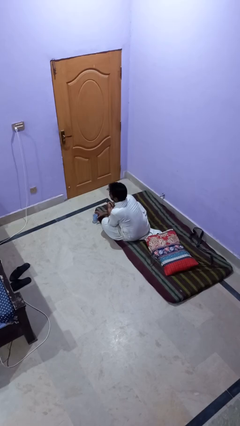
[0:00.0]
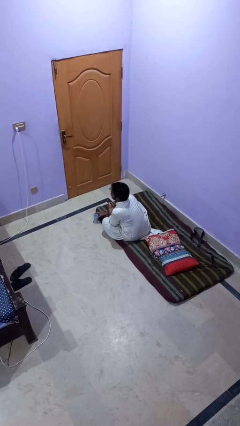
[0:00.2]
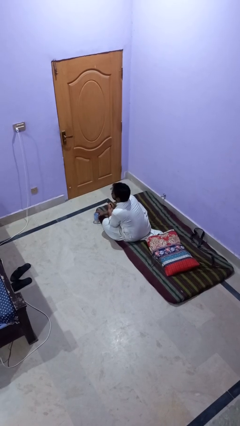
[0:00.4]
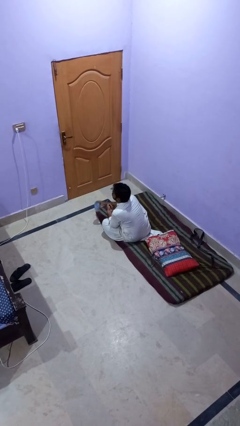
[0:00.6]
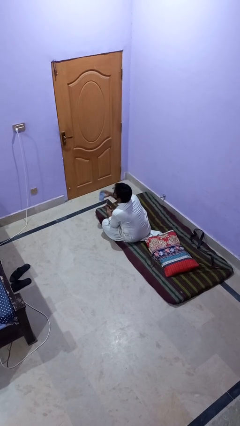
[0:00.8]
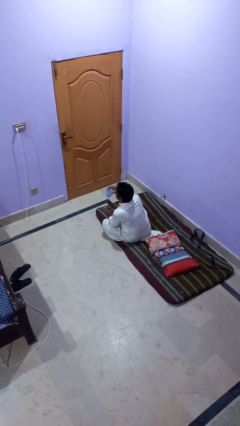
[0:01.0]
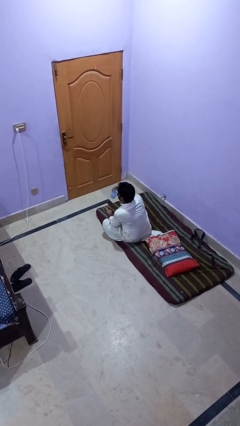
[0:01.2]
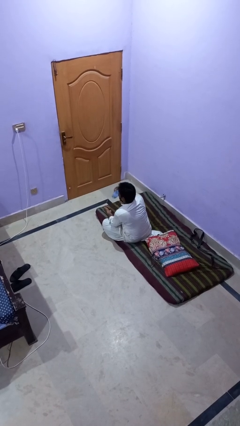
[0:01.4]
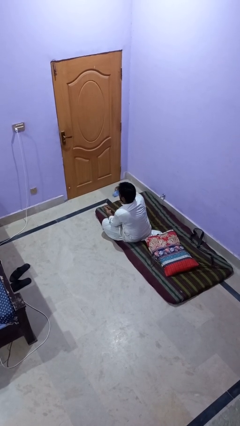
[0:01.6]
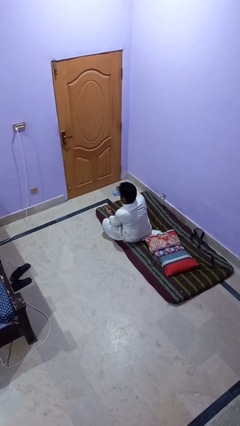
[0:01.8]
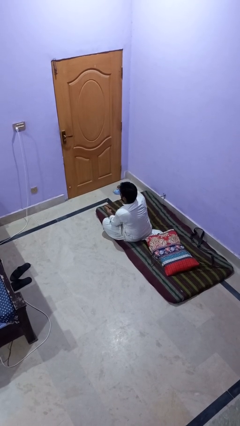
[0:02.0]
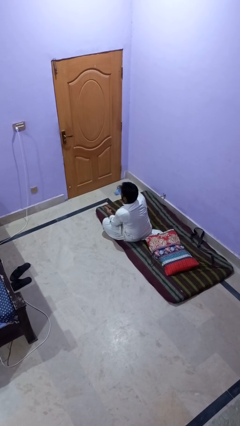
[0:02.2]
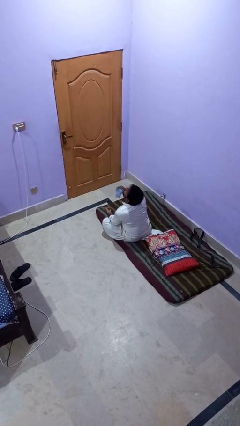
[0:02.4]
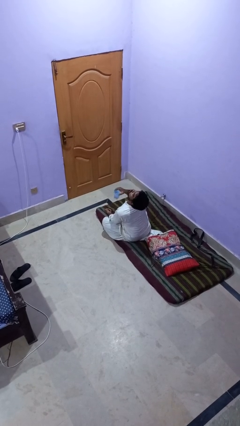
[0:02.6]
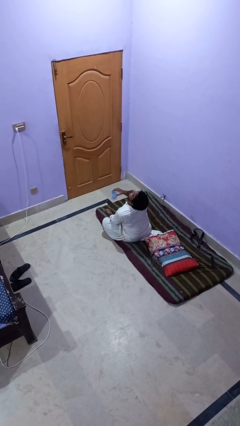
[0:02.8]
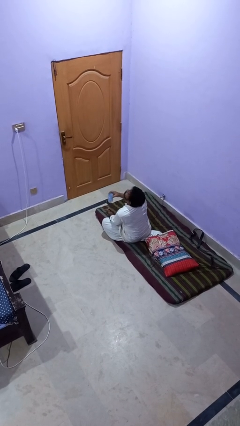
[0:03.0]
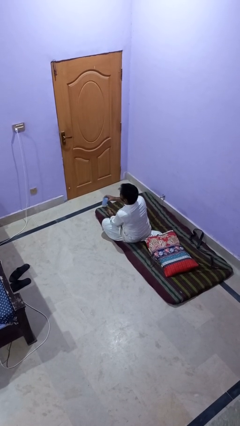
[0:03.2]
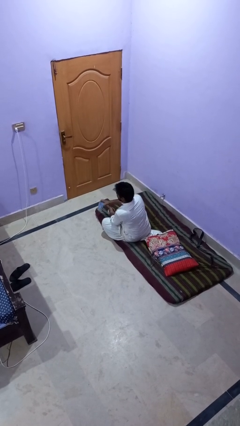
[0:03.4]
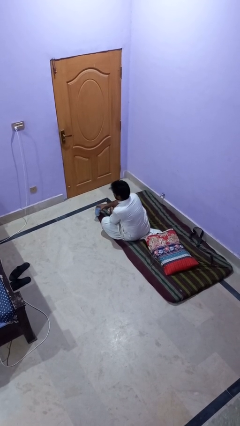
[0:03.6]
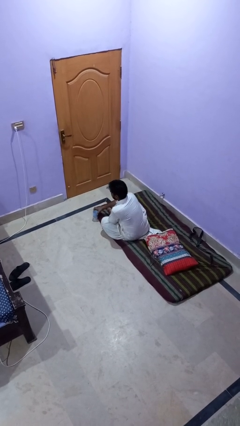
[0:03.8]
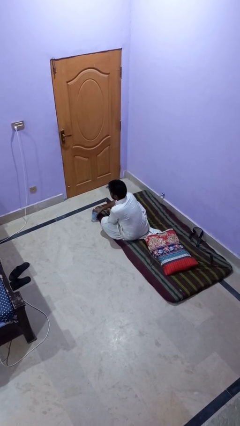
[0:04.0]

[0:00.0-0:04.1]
person drinks from cup

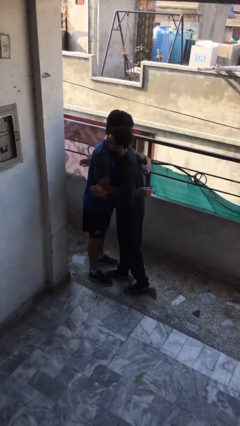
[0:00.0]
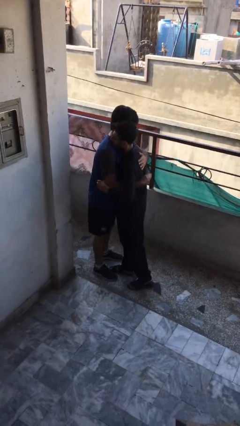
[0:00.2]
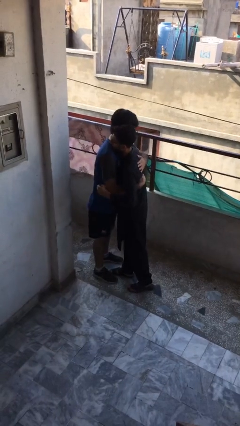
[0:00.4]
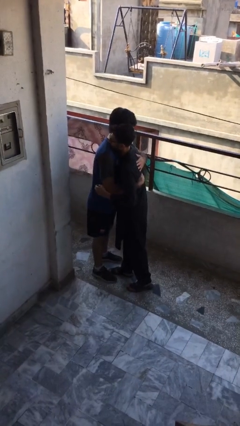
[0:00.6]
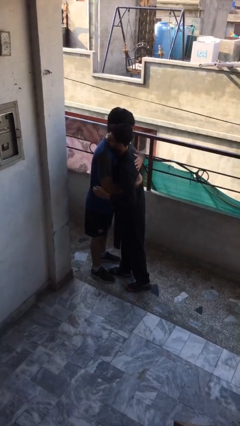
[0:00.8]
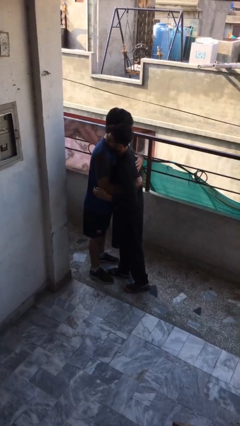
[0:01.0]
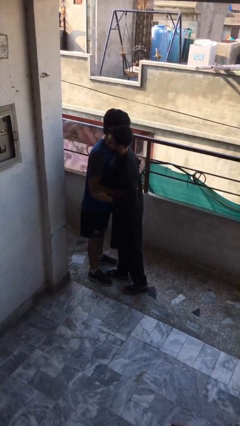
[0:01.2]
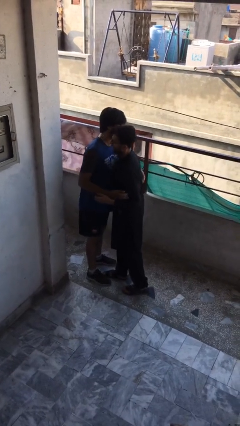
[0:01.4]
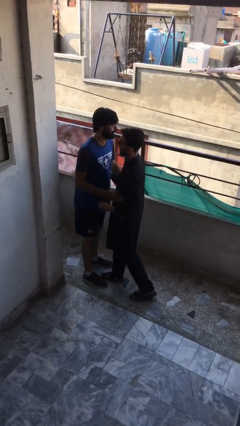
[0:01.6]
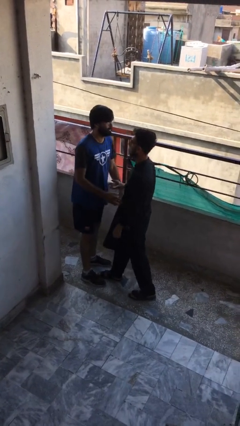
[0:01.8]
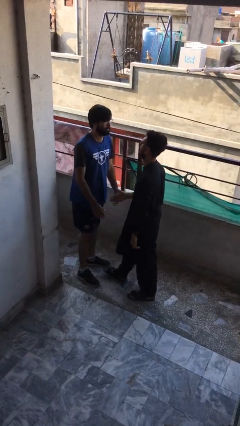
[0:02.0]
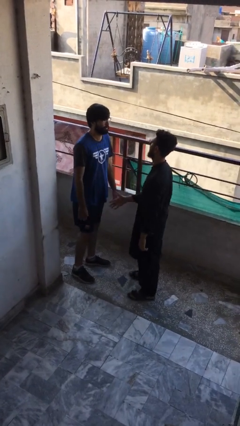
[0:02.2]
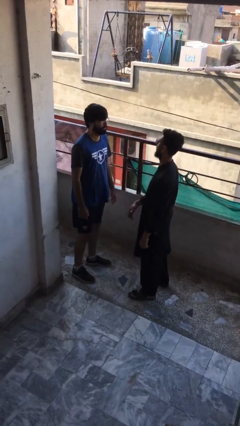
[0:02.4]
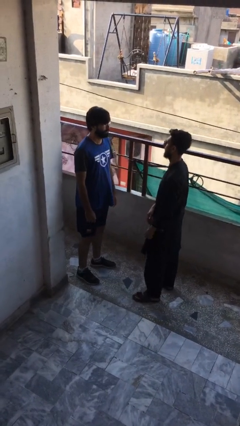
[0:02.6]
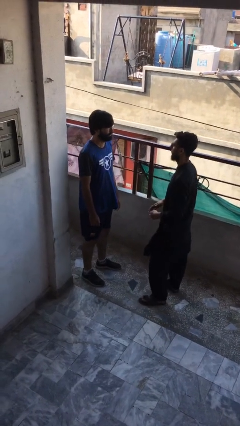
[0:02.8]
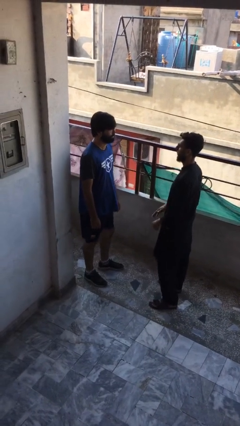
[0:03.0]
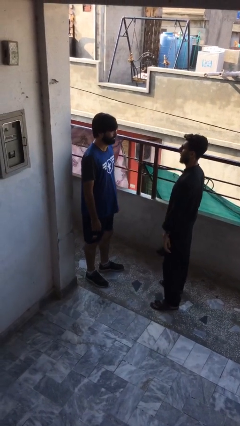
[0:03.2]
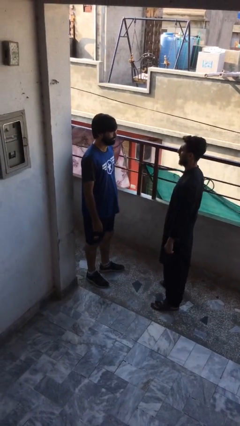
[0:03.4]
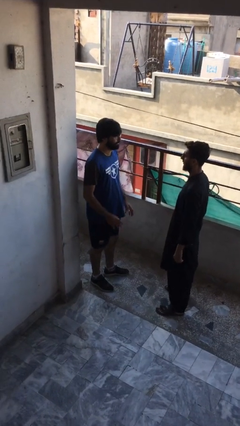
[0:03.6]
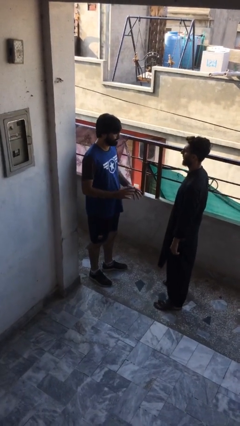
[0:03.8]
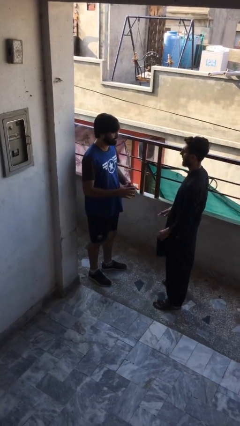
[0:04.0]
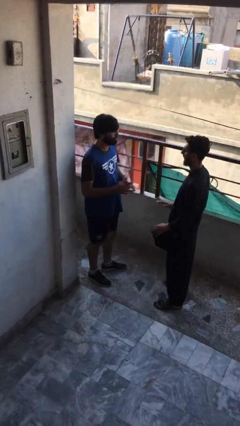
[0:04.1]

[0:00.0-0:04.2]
person embraces person

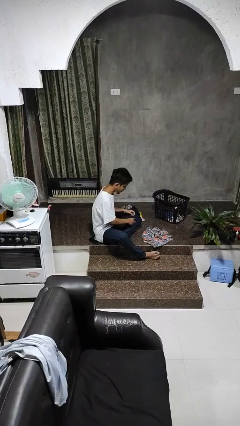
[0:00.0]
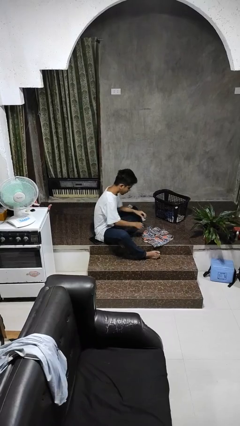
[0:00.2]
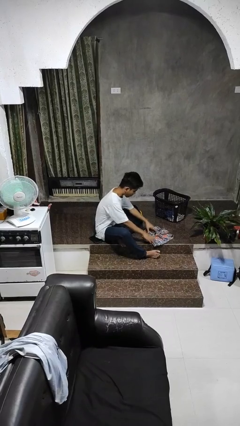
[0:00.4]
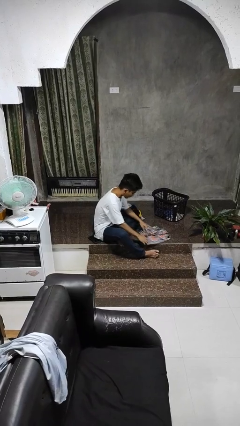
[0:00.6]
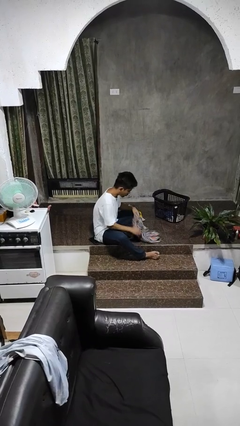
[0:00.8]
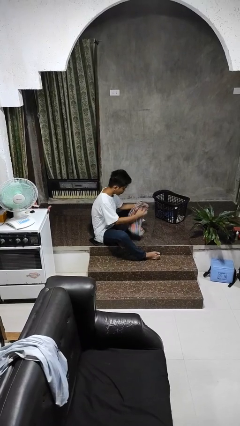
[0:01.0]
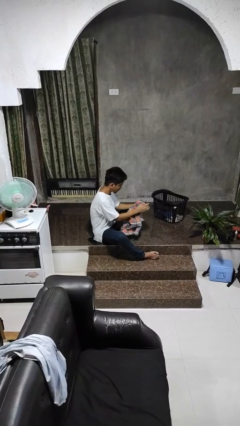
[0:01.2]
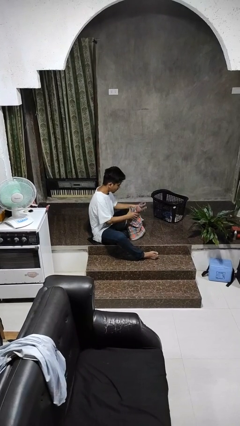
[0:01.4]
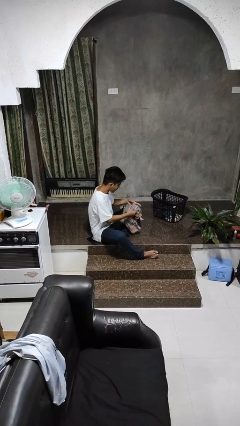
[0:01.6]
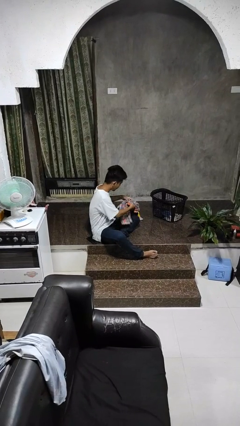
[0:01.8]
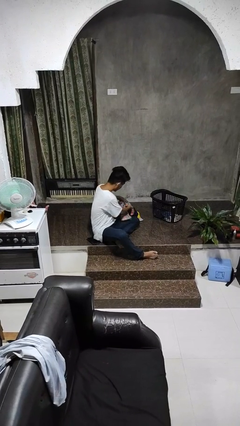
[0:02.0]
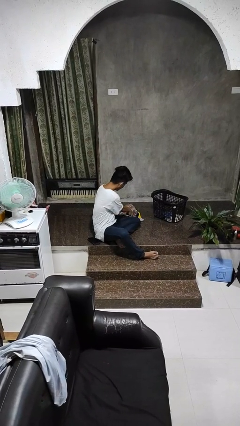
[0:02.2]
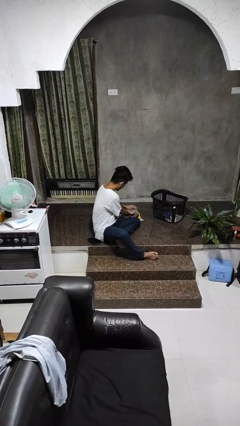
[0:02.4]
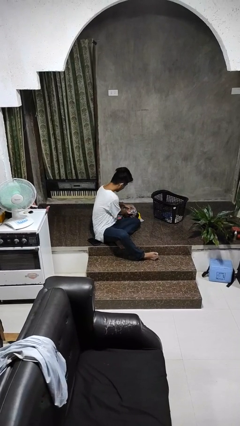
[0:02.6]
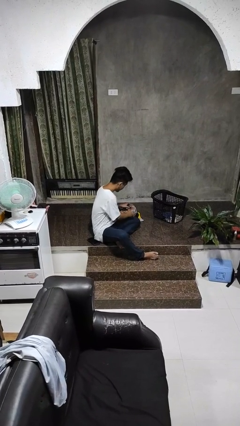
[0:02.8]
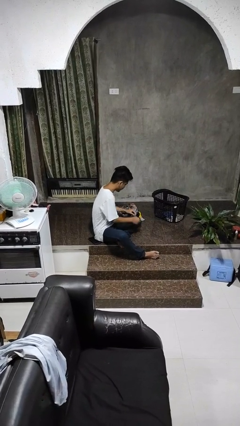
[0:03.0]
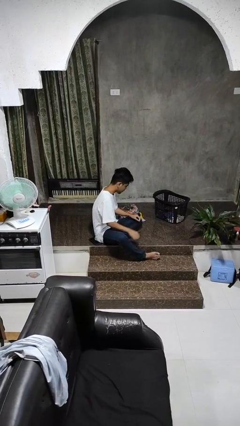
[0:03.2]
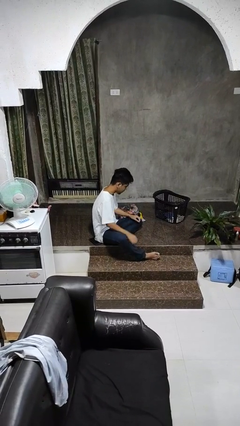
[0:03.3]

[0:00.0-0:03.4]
person folds shirt

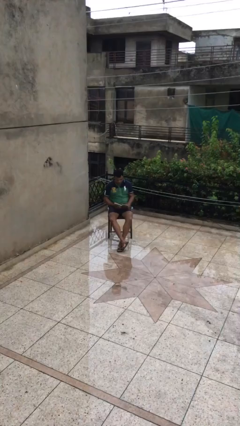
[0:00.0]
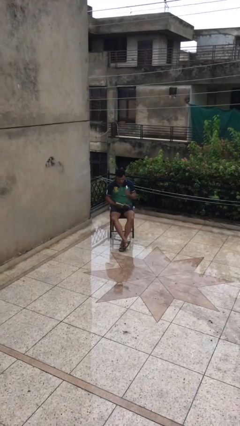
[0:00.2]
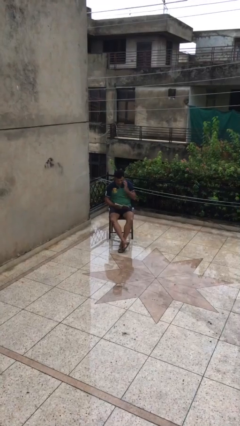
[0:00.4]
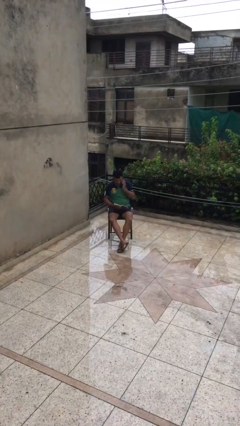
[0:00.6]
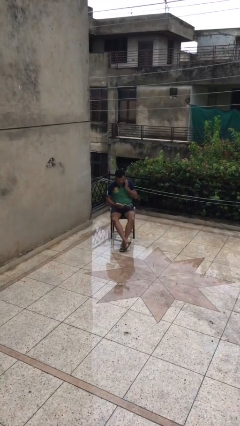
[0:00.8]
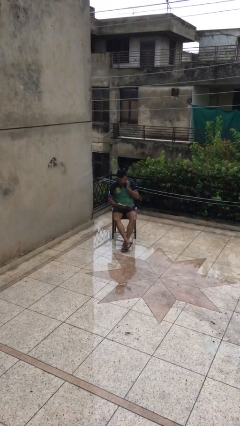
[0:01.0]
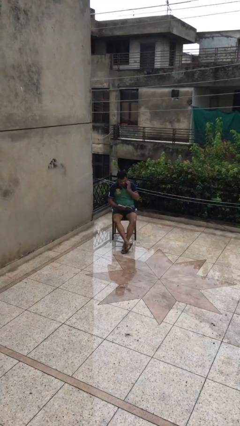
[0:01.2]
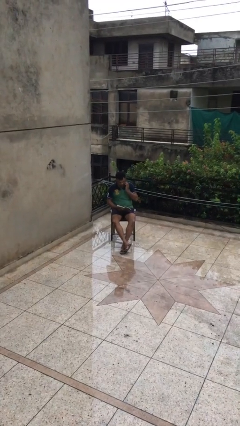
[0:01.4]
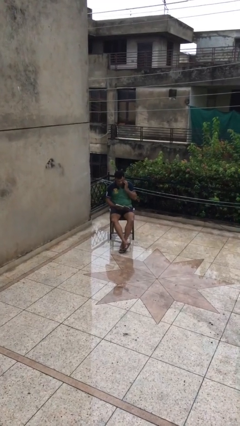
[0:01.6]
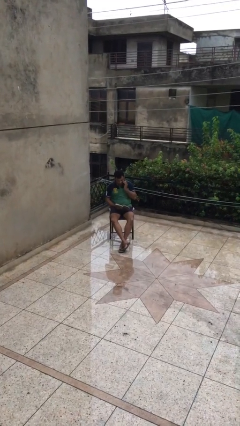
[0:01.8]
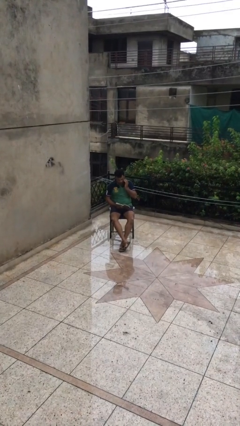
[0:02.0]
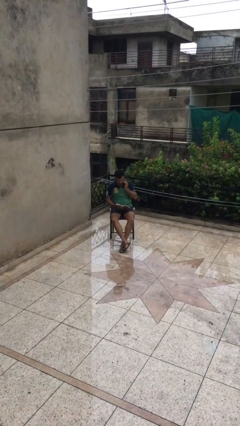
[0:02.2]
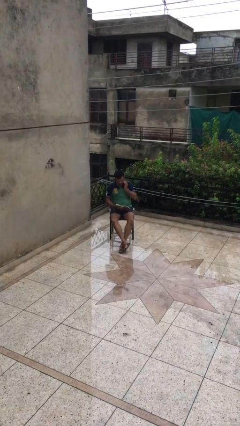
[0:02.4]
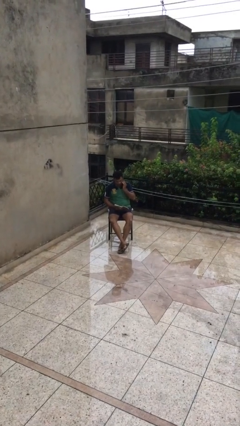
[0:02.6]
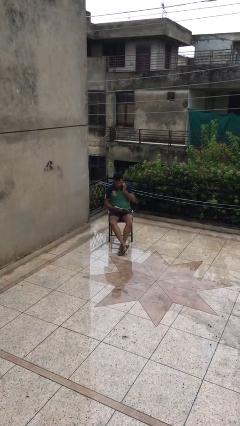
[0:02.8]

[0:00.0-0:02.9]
person reads document

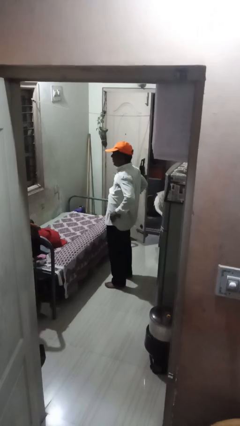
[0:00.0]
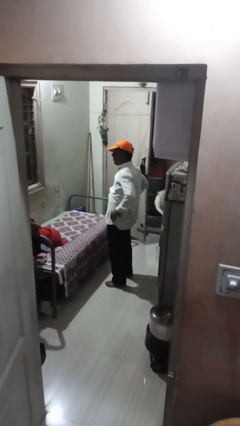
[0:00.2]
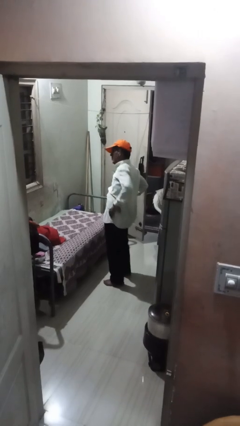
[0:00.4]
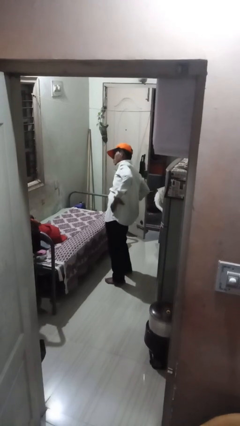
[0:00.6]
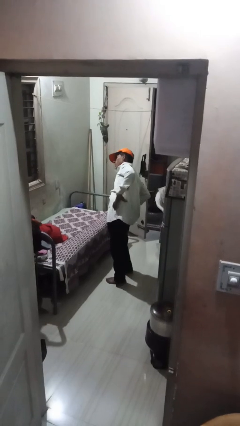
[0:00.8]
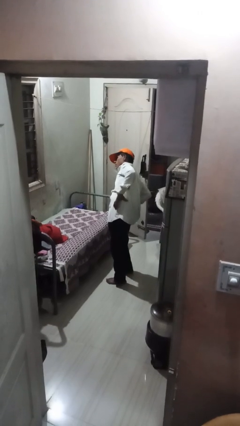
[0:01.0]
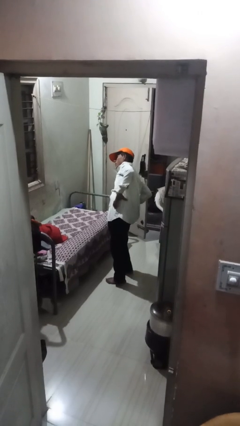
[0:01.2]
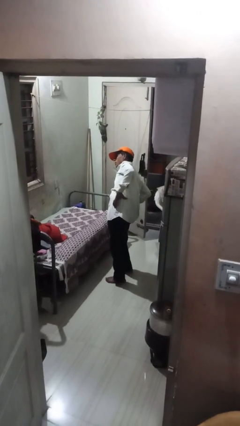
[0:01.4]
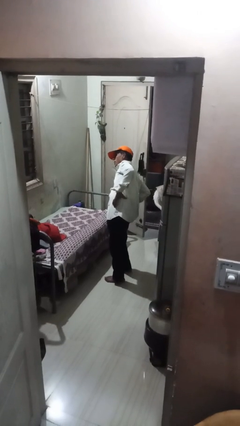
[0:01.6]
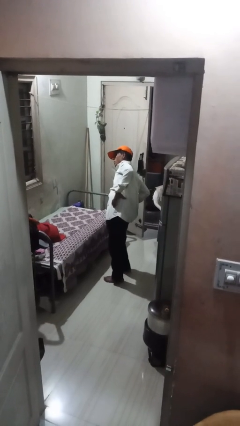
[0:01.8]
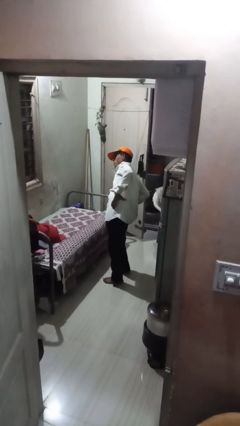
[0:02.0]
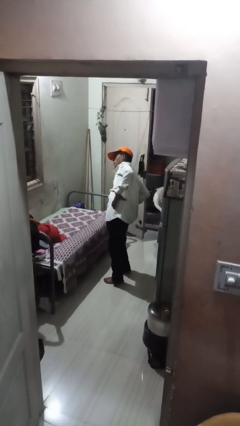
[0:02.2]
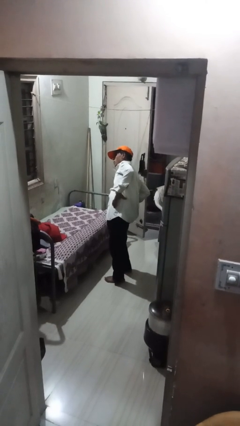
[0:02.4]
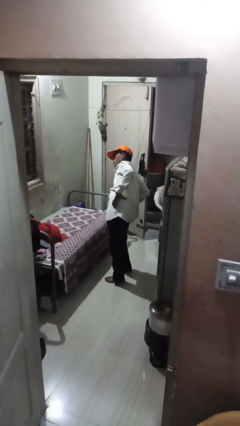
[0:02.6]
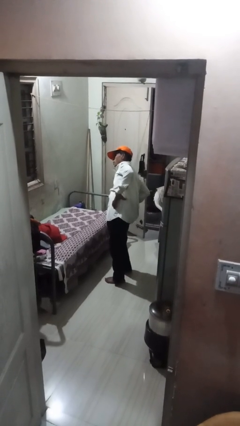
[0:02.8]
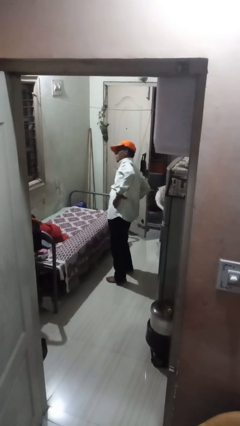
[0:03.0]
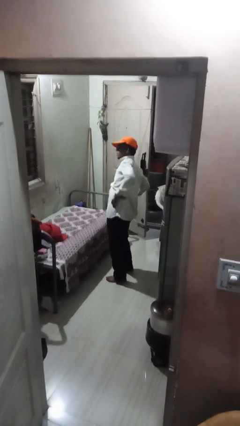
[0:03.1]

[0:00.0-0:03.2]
person stretches arms to side
